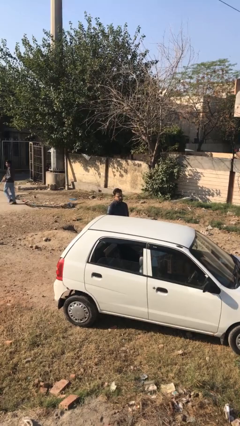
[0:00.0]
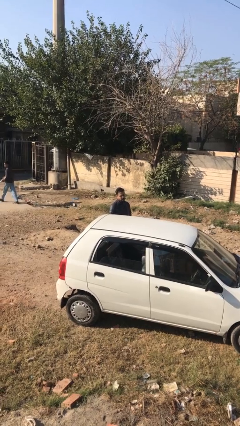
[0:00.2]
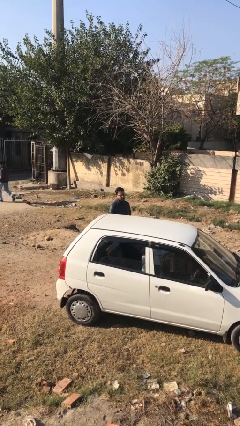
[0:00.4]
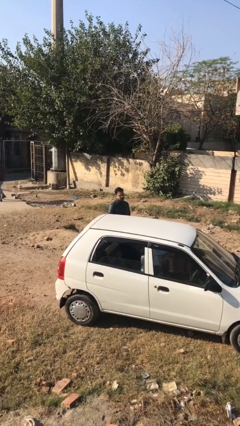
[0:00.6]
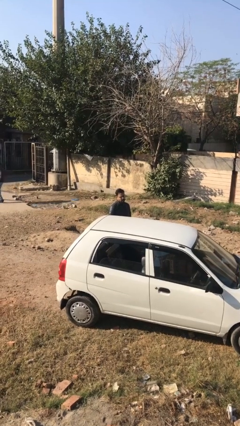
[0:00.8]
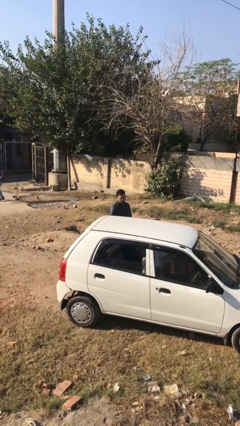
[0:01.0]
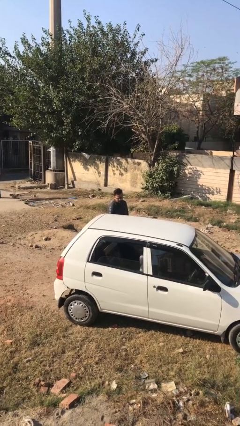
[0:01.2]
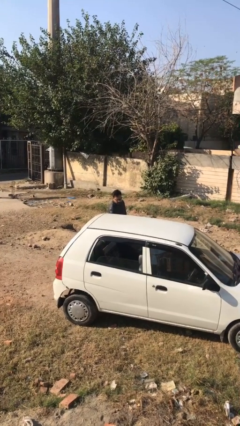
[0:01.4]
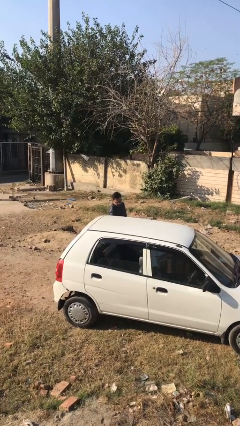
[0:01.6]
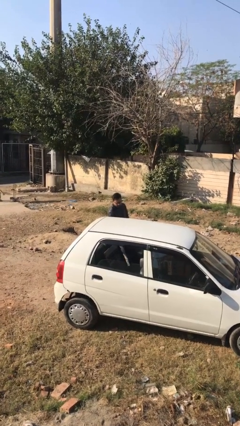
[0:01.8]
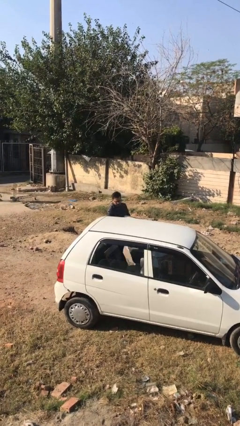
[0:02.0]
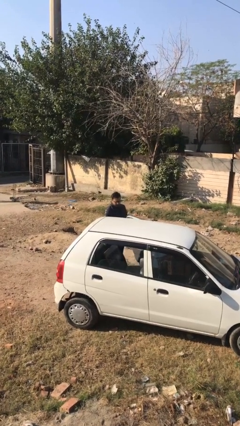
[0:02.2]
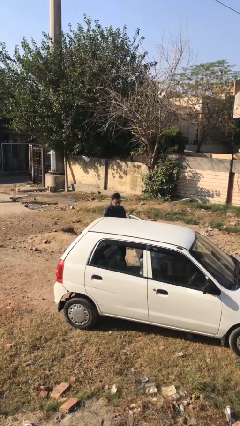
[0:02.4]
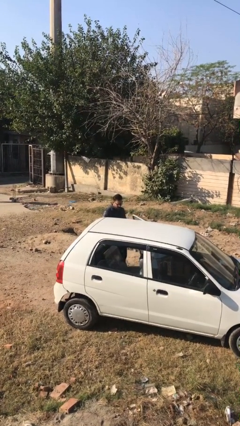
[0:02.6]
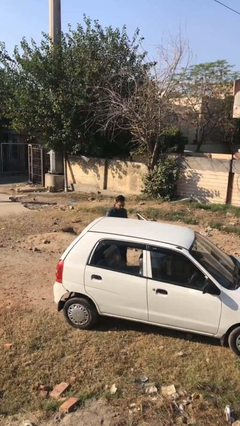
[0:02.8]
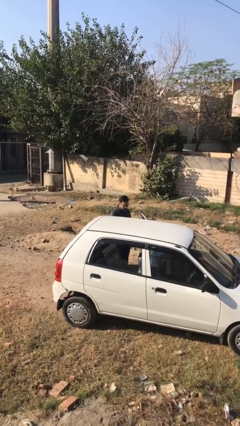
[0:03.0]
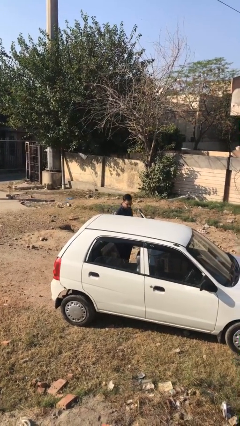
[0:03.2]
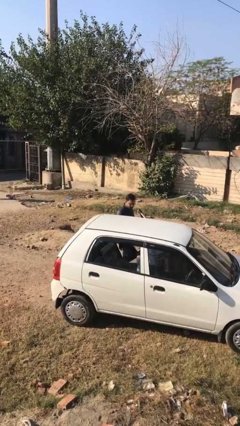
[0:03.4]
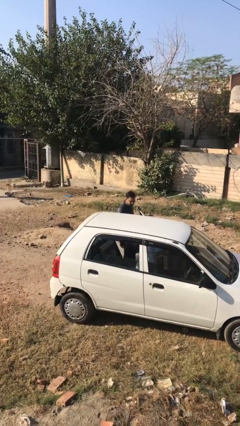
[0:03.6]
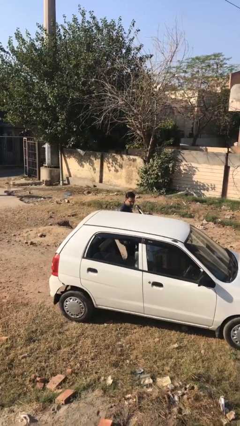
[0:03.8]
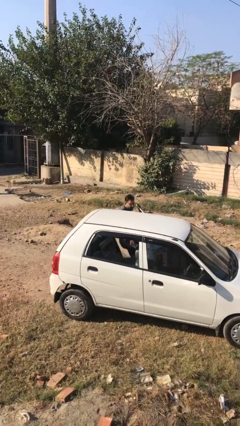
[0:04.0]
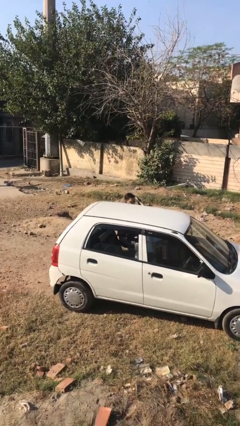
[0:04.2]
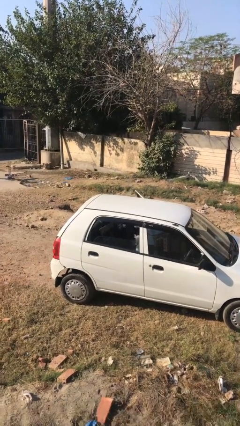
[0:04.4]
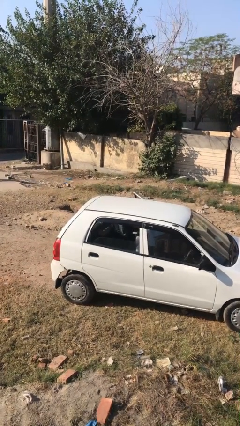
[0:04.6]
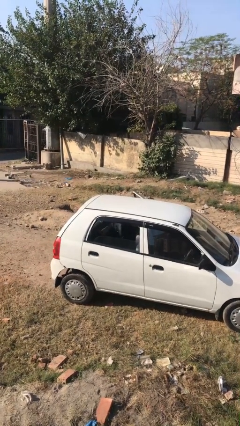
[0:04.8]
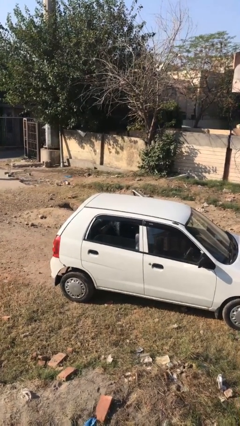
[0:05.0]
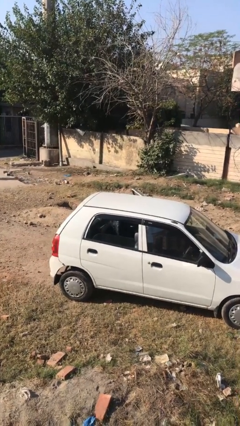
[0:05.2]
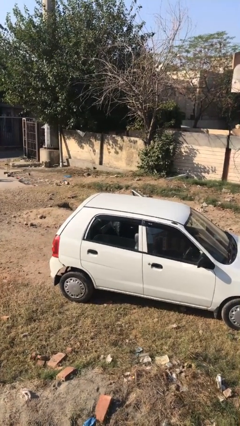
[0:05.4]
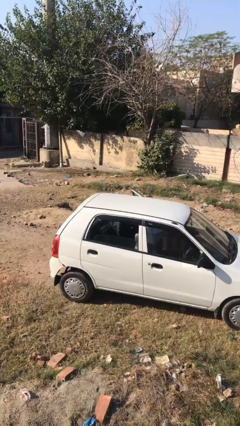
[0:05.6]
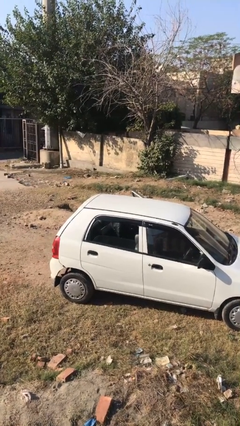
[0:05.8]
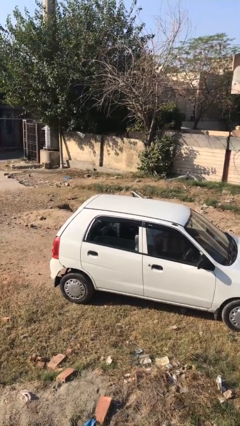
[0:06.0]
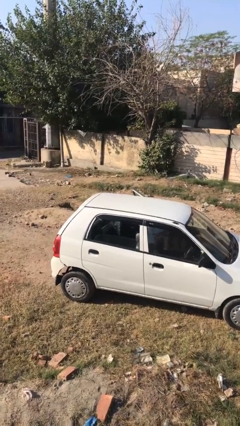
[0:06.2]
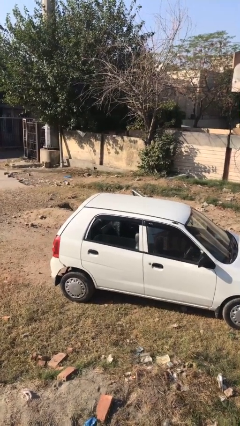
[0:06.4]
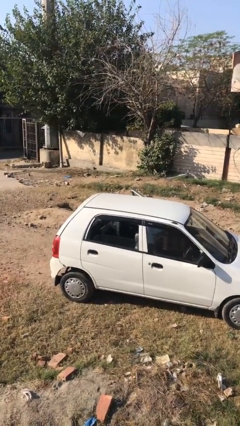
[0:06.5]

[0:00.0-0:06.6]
person enters car

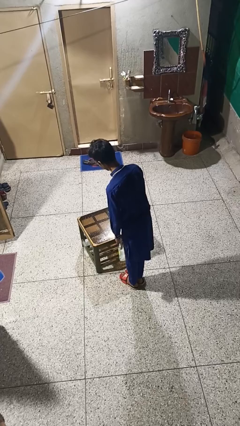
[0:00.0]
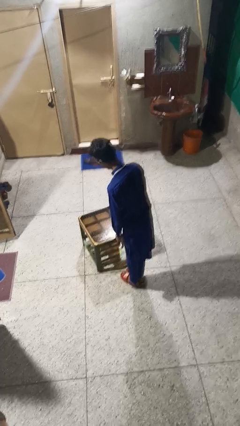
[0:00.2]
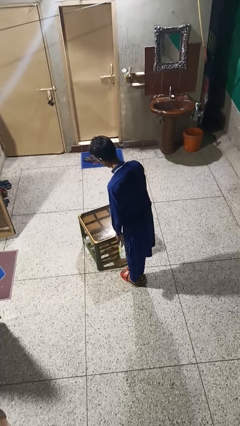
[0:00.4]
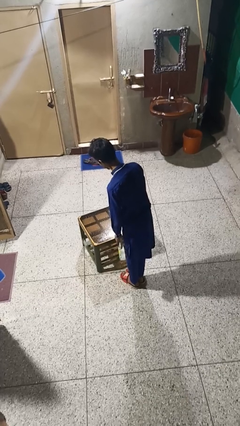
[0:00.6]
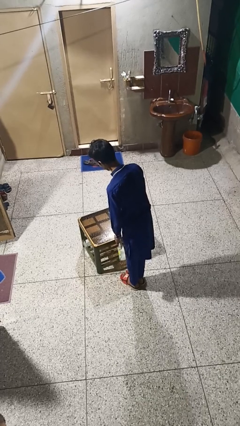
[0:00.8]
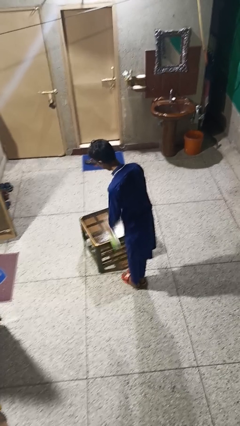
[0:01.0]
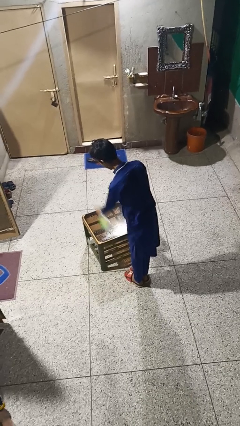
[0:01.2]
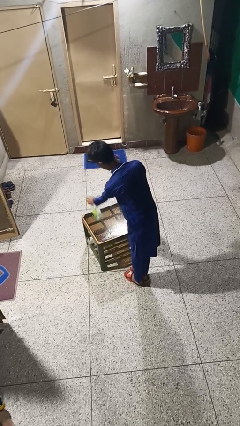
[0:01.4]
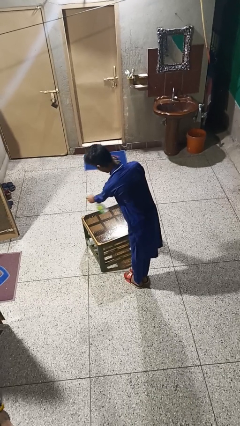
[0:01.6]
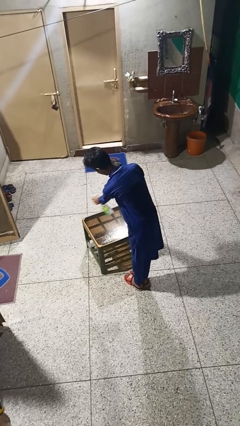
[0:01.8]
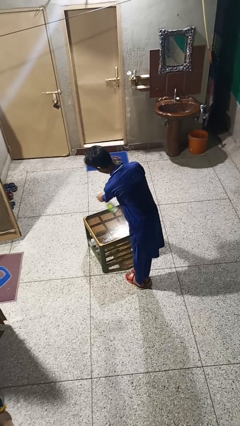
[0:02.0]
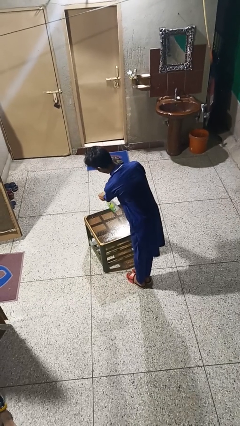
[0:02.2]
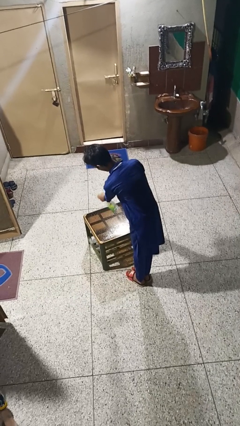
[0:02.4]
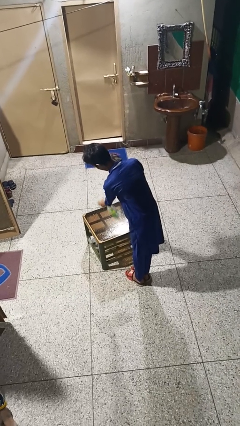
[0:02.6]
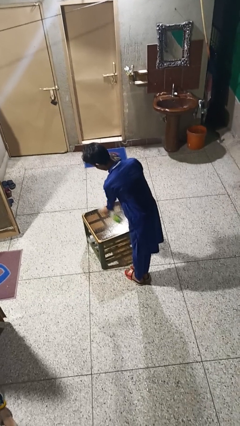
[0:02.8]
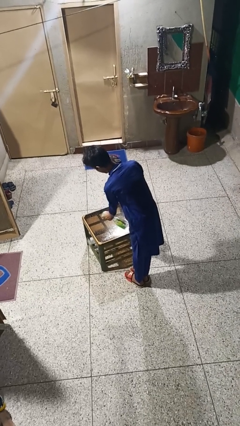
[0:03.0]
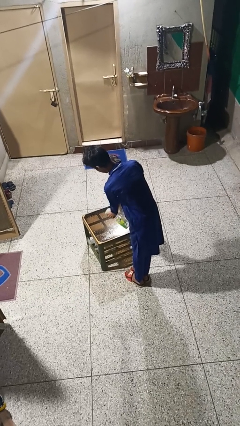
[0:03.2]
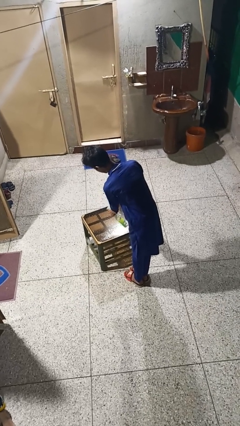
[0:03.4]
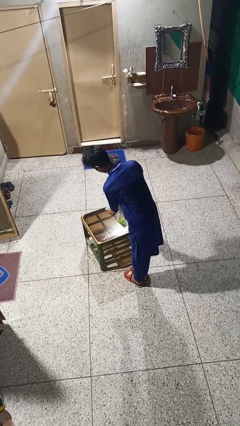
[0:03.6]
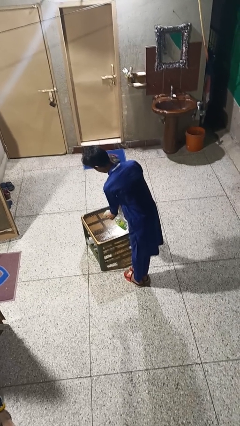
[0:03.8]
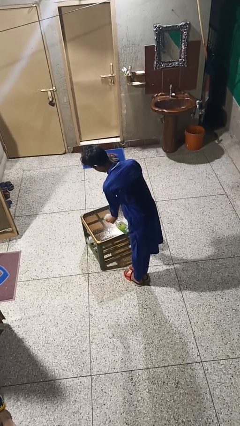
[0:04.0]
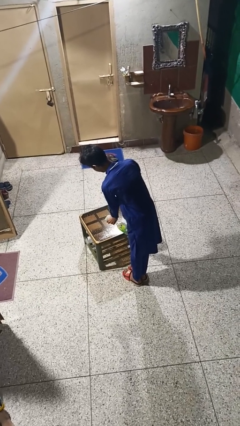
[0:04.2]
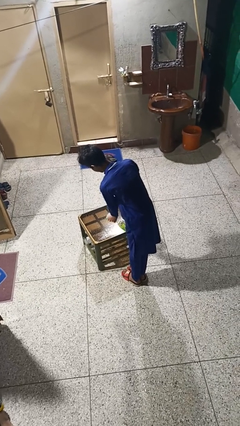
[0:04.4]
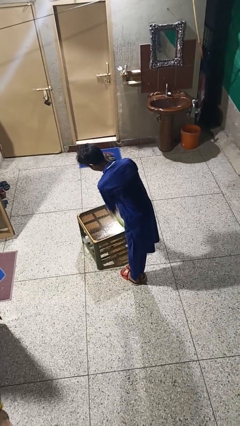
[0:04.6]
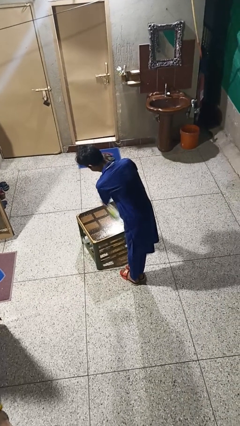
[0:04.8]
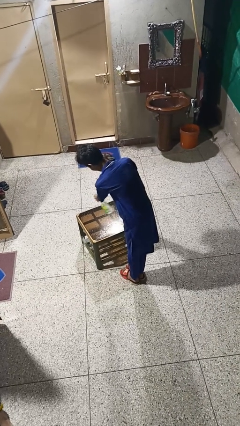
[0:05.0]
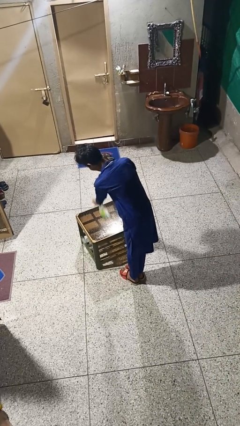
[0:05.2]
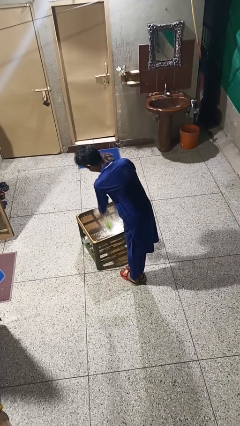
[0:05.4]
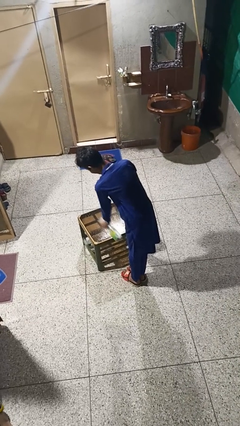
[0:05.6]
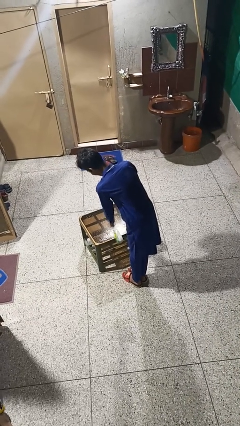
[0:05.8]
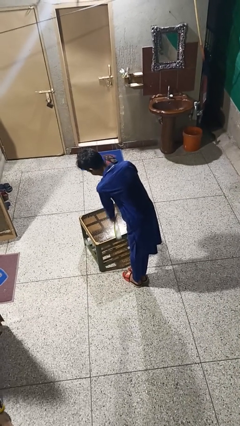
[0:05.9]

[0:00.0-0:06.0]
person sprays from bottle

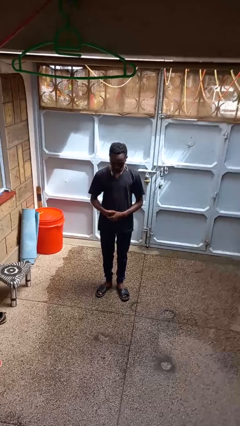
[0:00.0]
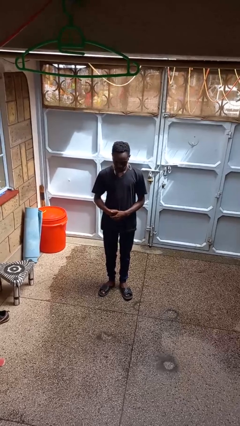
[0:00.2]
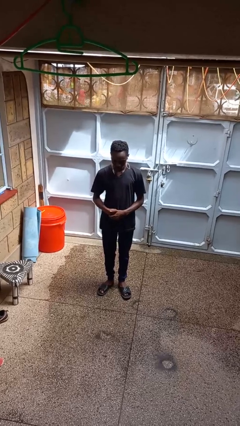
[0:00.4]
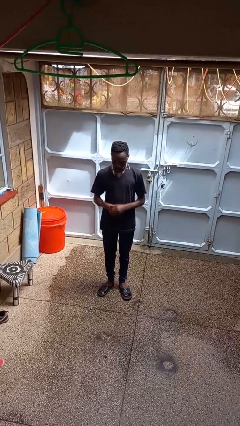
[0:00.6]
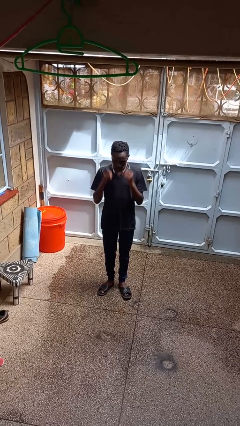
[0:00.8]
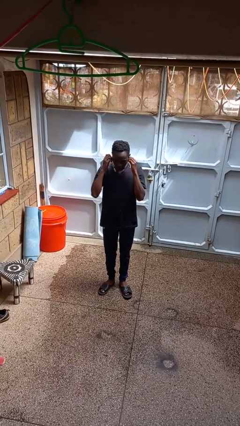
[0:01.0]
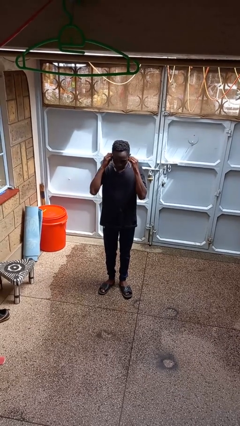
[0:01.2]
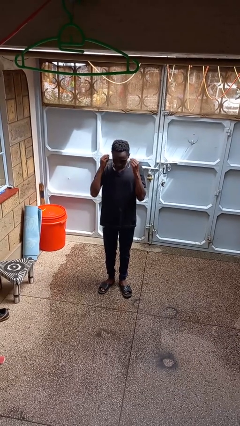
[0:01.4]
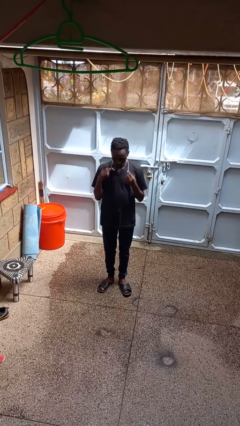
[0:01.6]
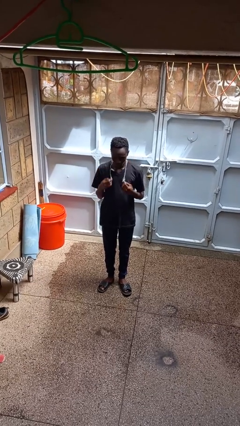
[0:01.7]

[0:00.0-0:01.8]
person takes off headphones

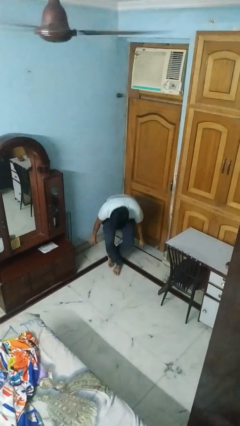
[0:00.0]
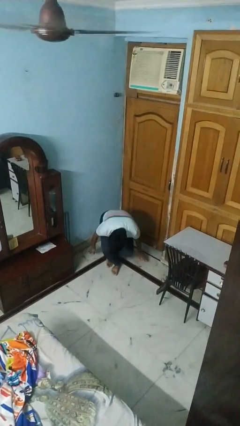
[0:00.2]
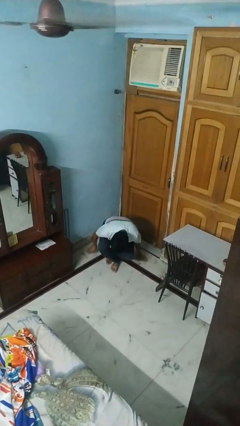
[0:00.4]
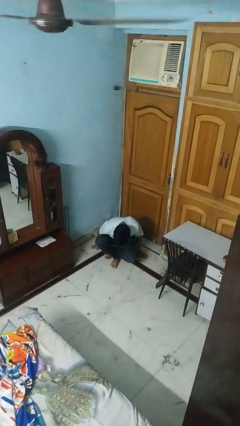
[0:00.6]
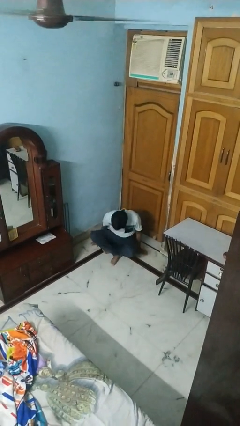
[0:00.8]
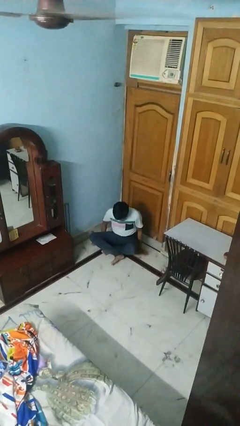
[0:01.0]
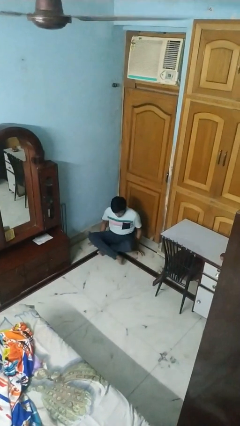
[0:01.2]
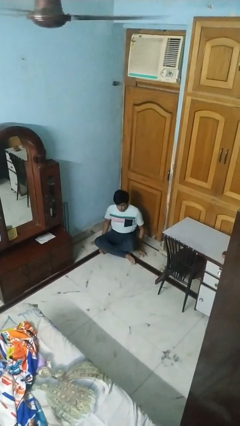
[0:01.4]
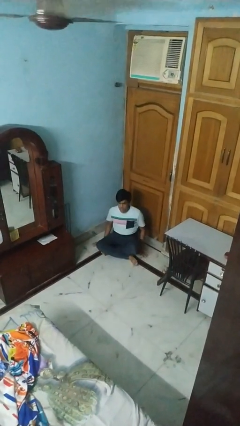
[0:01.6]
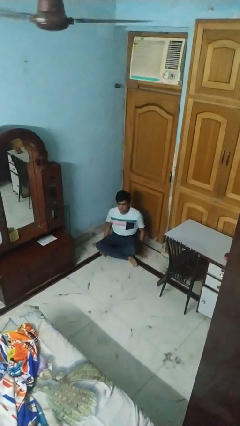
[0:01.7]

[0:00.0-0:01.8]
person sits crisscross

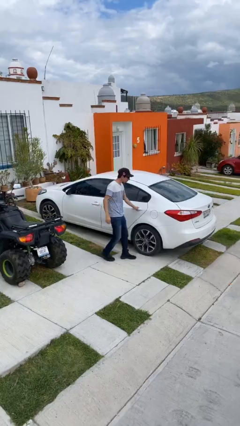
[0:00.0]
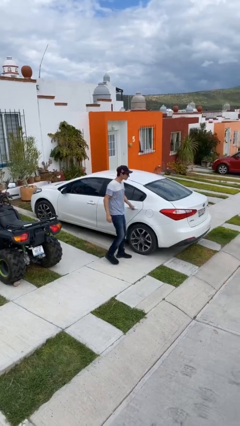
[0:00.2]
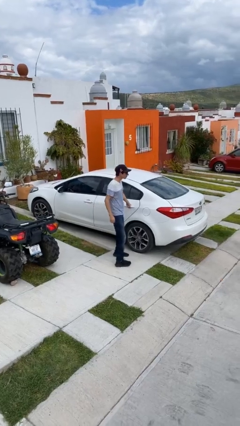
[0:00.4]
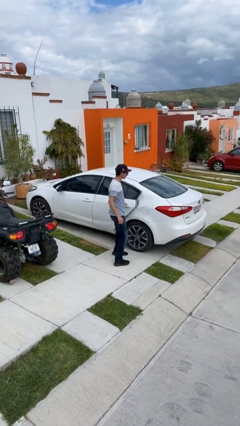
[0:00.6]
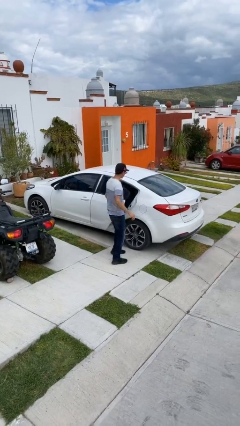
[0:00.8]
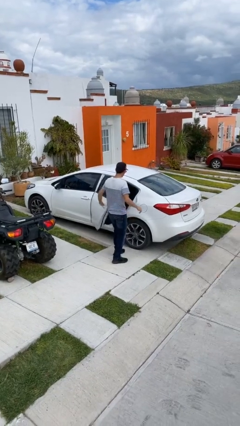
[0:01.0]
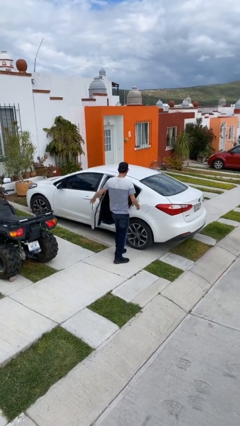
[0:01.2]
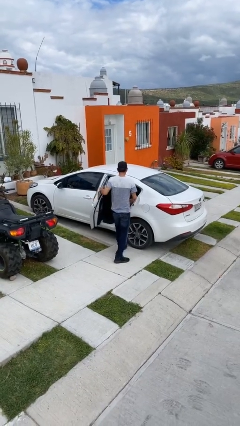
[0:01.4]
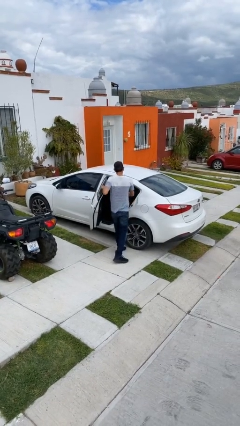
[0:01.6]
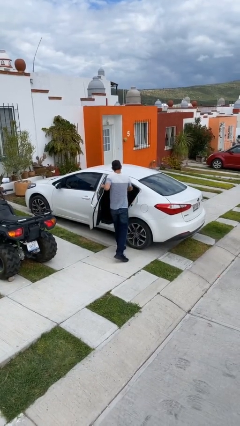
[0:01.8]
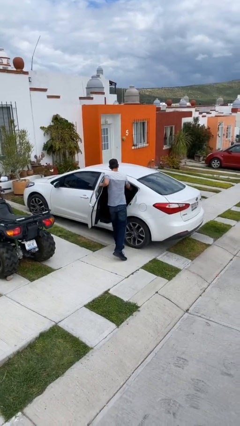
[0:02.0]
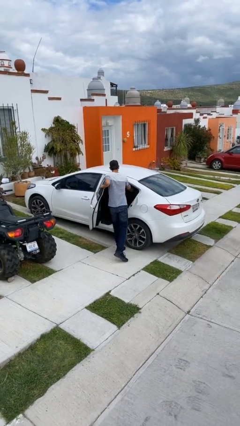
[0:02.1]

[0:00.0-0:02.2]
person opens car door
